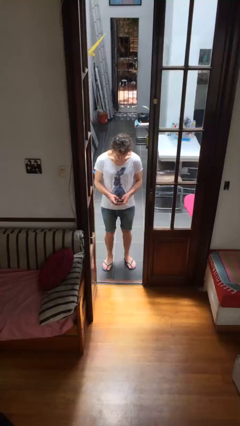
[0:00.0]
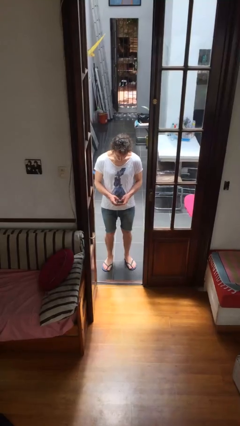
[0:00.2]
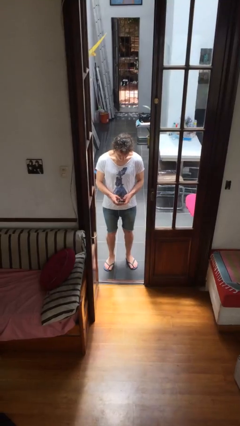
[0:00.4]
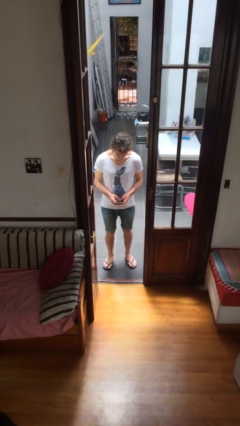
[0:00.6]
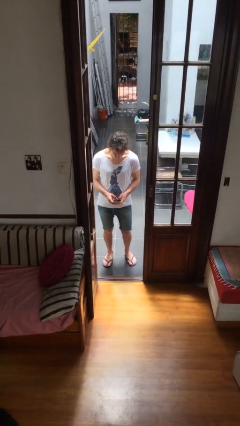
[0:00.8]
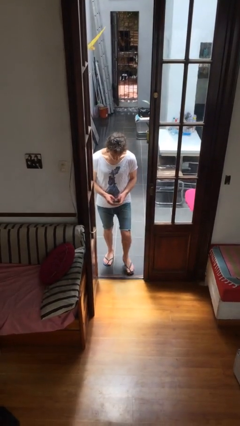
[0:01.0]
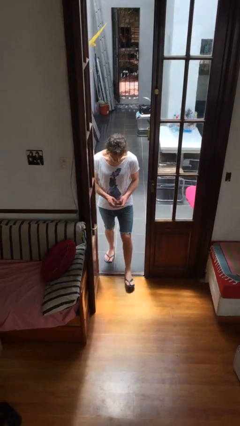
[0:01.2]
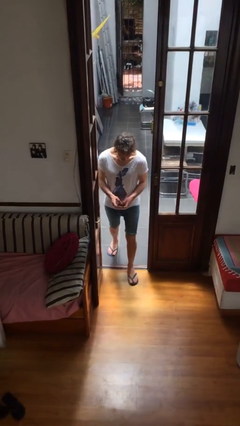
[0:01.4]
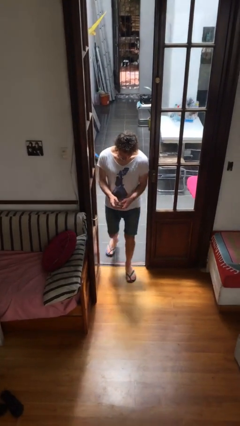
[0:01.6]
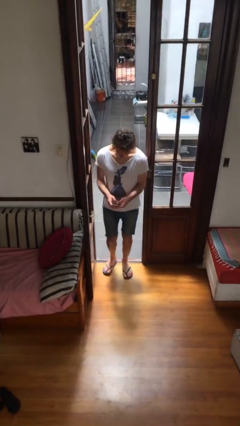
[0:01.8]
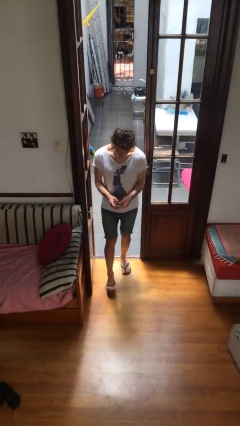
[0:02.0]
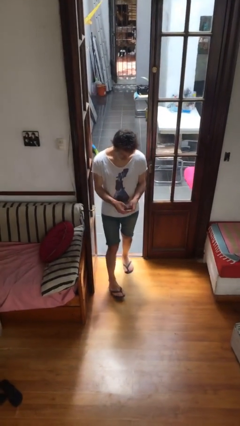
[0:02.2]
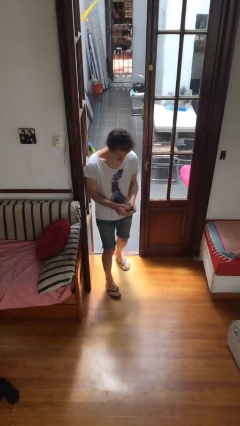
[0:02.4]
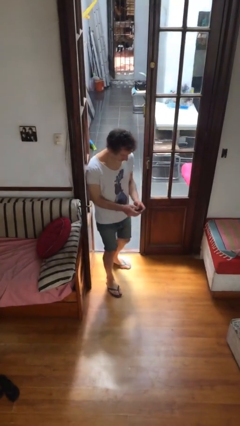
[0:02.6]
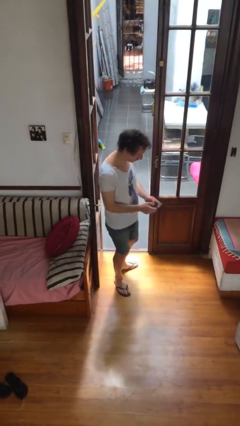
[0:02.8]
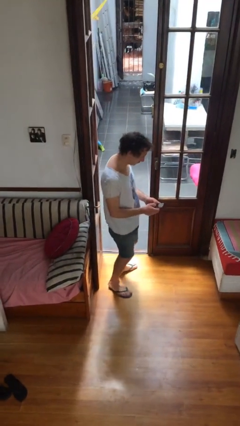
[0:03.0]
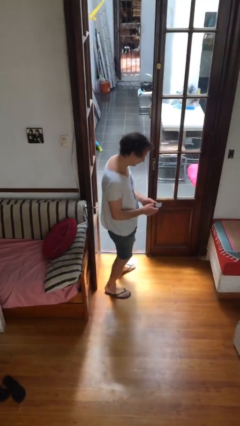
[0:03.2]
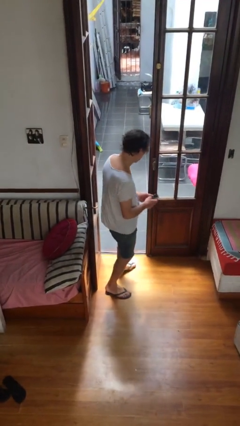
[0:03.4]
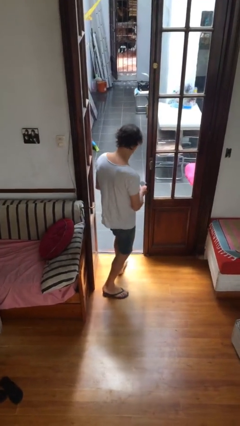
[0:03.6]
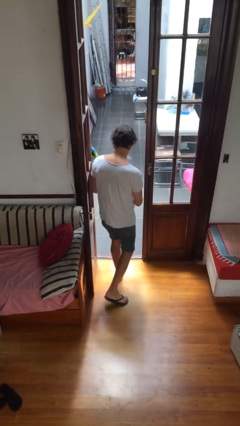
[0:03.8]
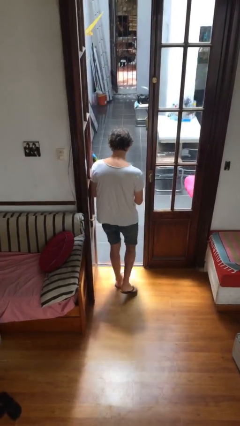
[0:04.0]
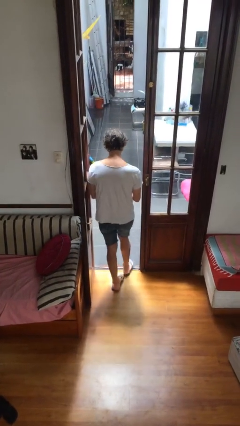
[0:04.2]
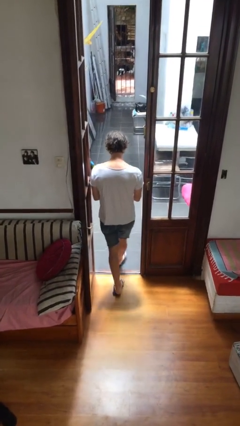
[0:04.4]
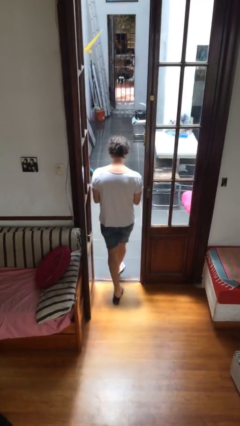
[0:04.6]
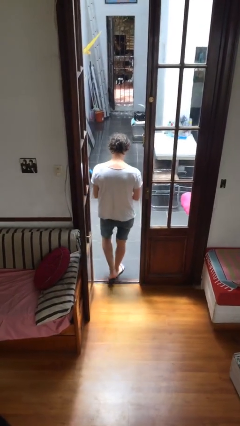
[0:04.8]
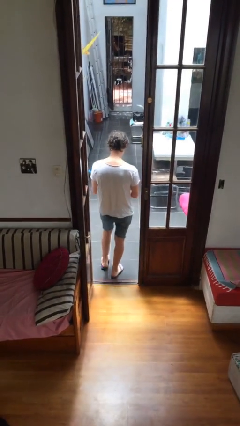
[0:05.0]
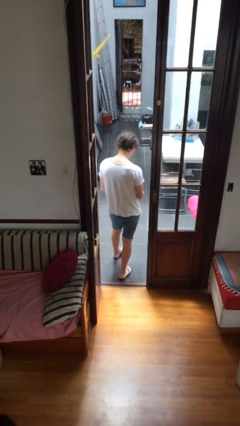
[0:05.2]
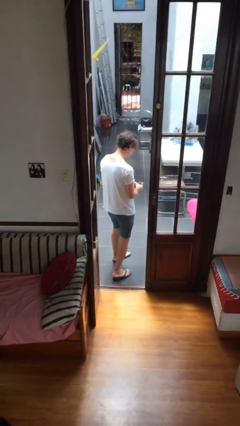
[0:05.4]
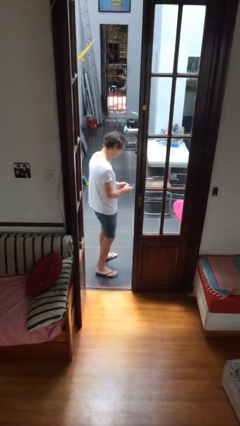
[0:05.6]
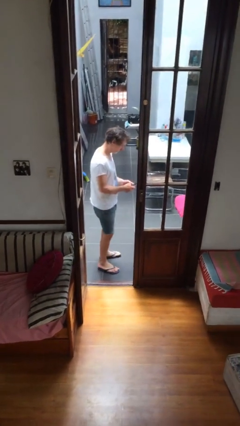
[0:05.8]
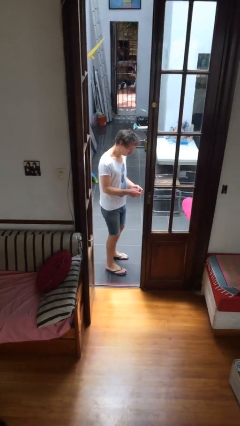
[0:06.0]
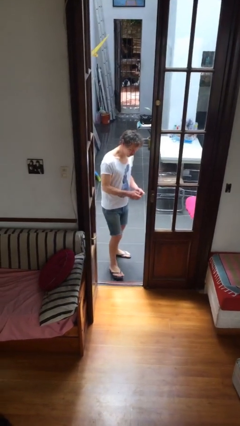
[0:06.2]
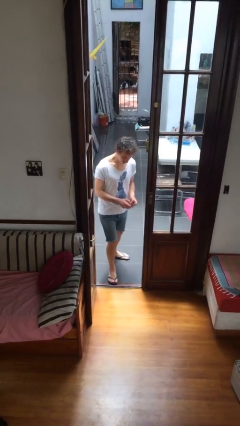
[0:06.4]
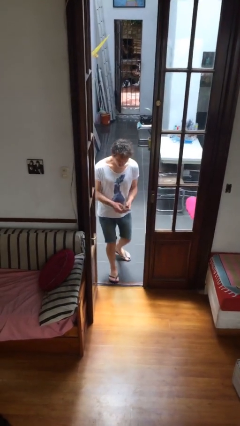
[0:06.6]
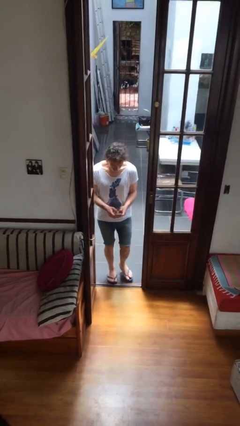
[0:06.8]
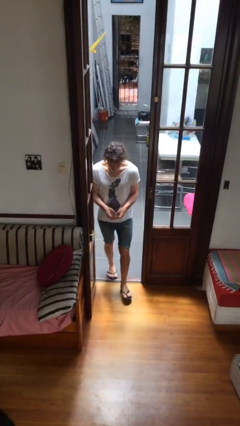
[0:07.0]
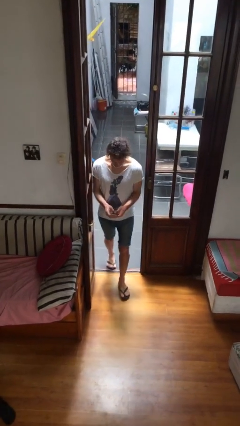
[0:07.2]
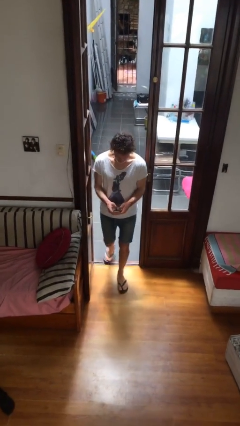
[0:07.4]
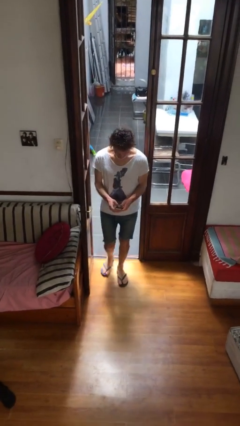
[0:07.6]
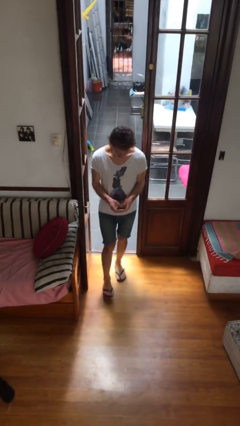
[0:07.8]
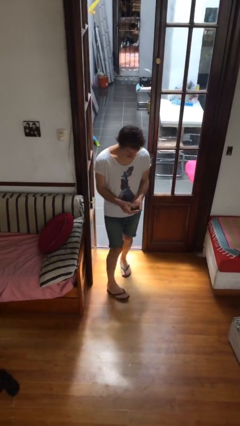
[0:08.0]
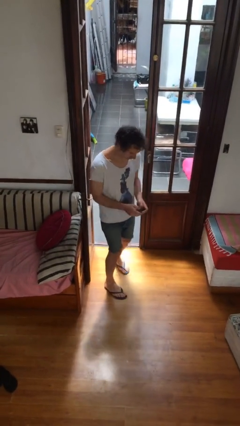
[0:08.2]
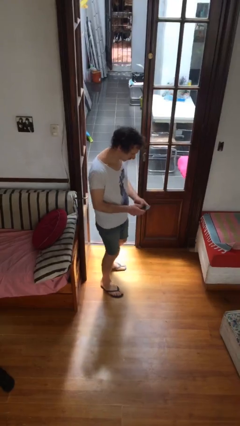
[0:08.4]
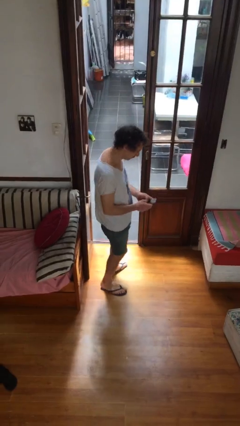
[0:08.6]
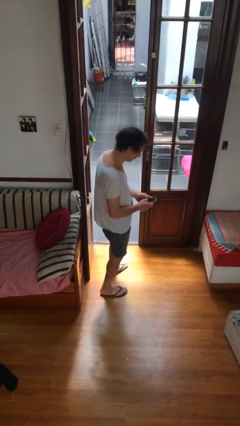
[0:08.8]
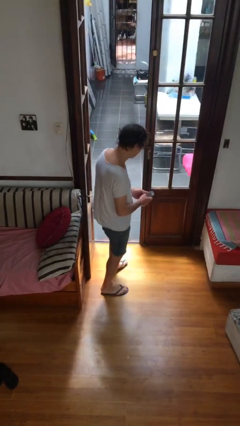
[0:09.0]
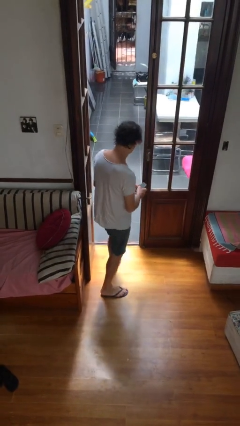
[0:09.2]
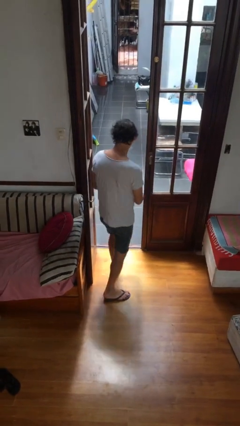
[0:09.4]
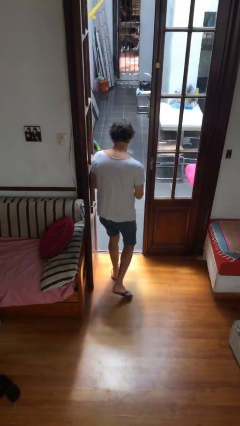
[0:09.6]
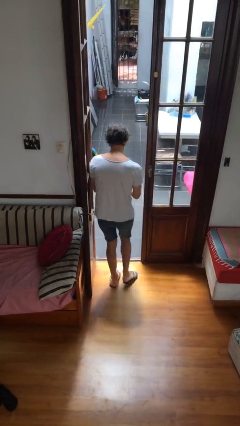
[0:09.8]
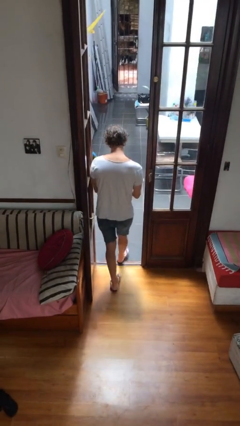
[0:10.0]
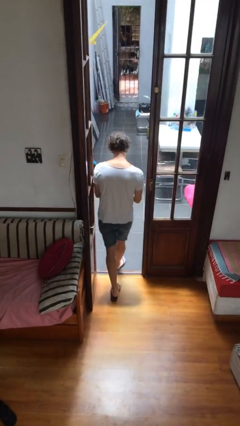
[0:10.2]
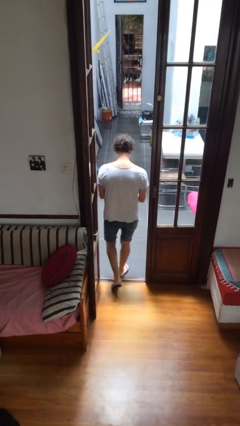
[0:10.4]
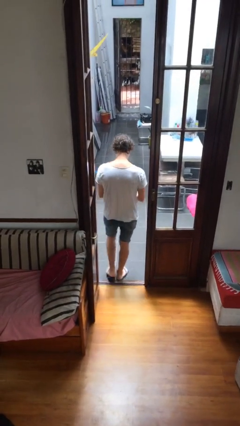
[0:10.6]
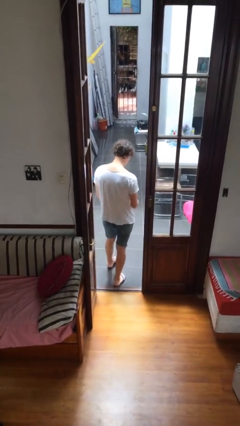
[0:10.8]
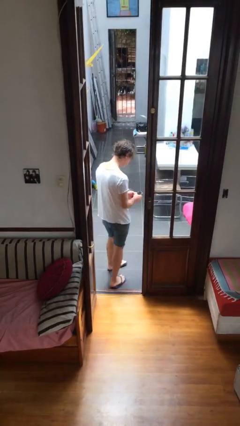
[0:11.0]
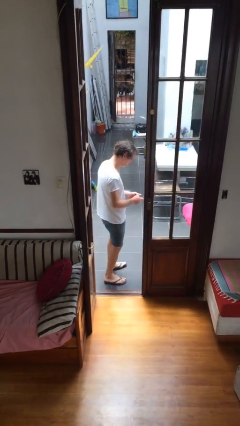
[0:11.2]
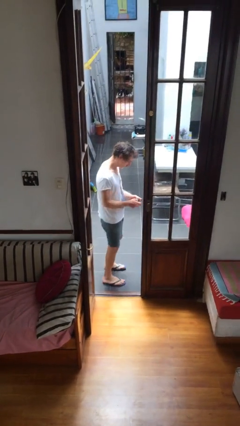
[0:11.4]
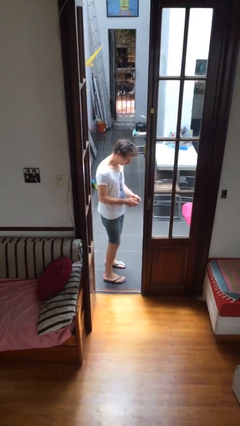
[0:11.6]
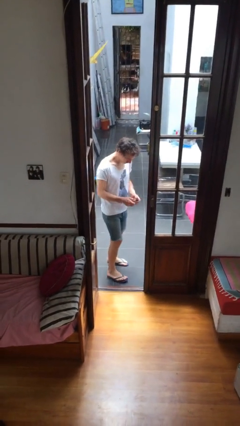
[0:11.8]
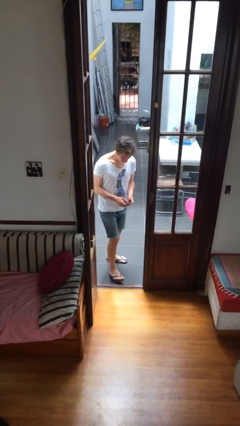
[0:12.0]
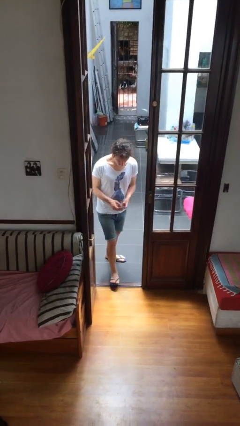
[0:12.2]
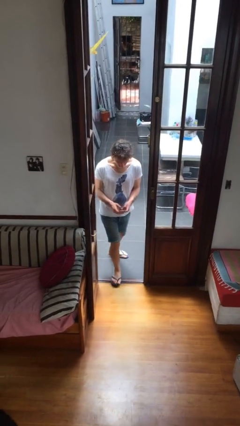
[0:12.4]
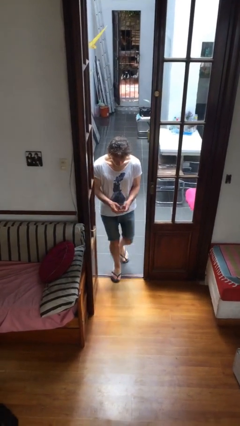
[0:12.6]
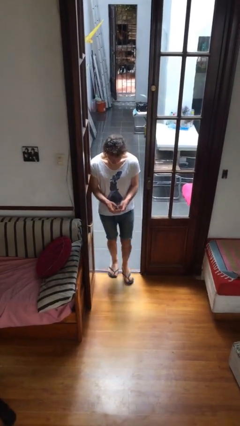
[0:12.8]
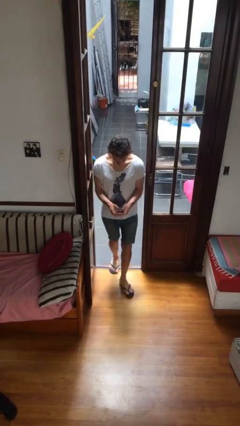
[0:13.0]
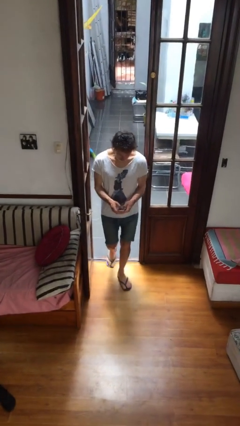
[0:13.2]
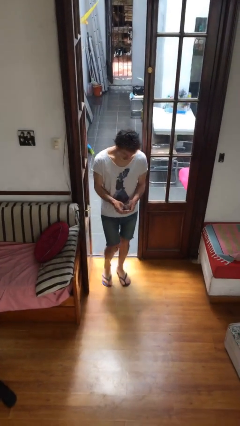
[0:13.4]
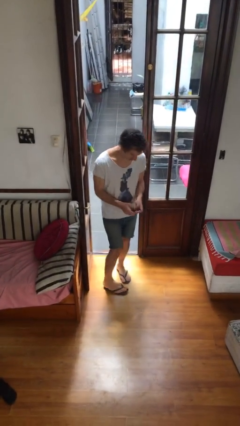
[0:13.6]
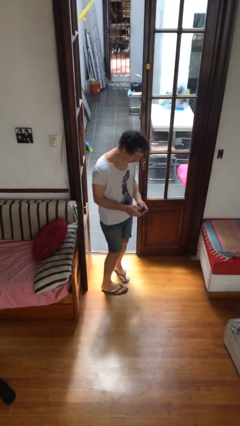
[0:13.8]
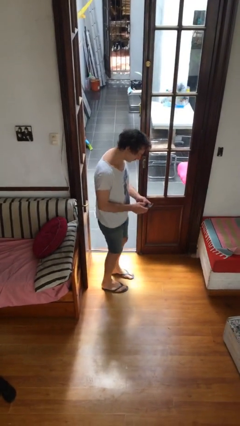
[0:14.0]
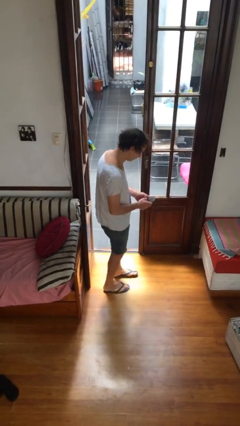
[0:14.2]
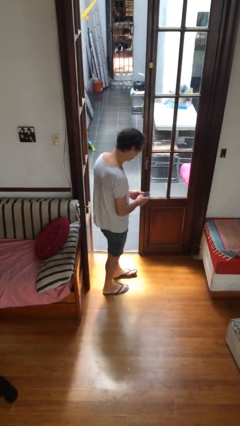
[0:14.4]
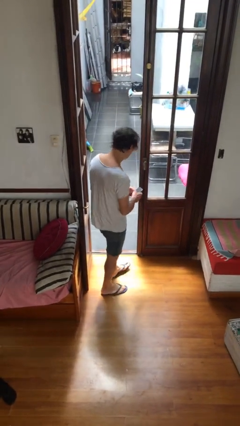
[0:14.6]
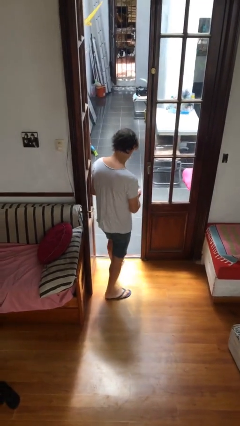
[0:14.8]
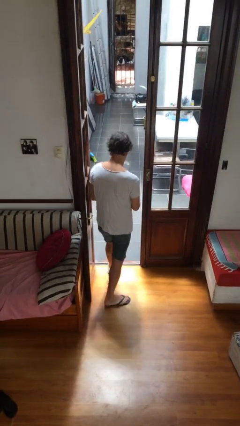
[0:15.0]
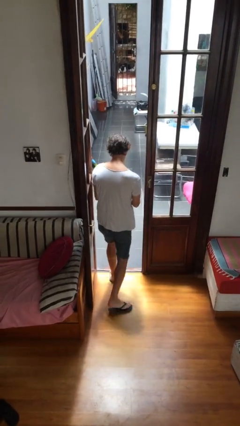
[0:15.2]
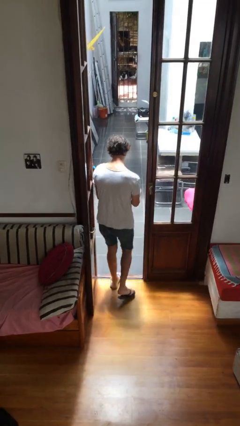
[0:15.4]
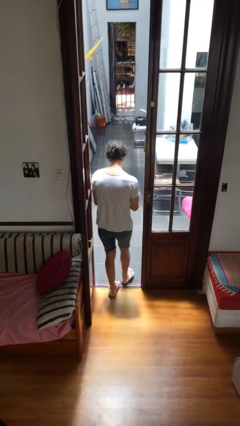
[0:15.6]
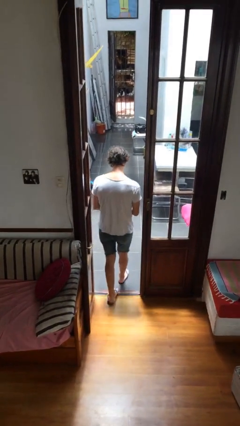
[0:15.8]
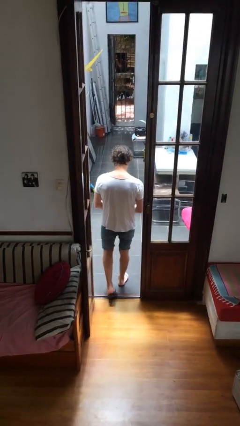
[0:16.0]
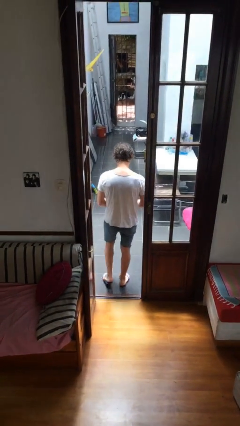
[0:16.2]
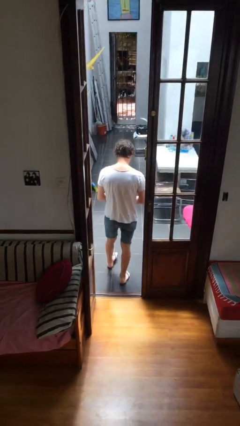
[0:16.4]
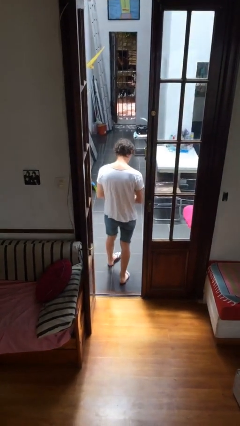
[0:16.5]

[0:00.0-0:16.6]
person texts on phone

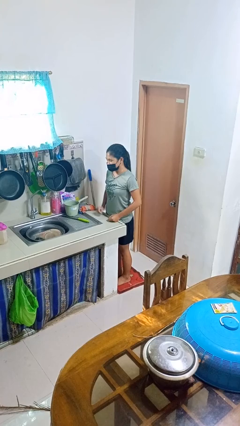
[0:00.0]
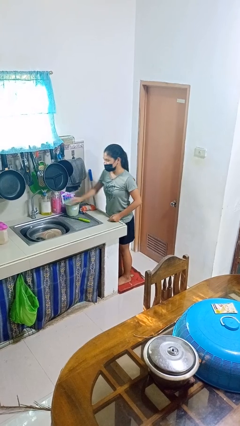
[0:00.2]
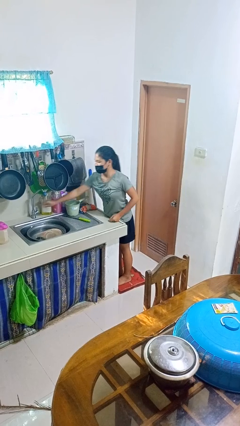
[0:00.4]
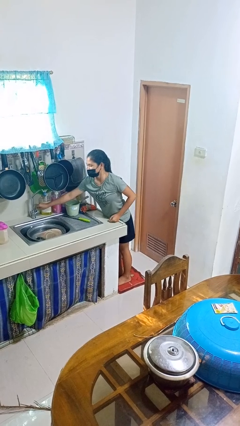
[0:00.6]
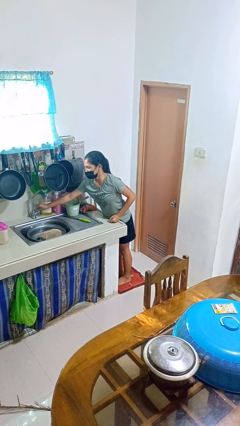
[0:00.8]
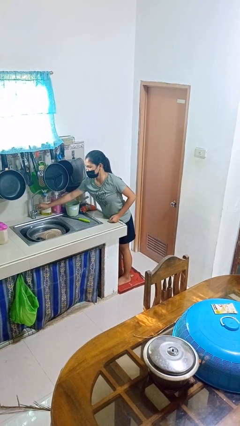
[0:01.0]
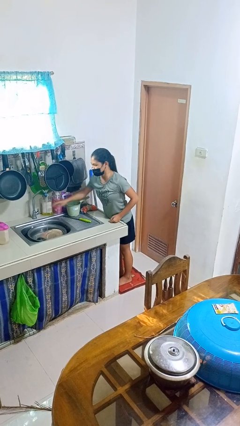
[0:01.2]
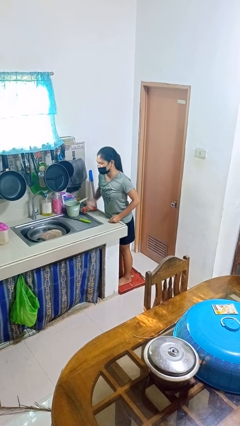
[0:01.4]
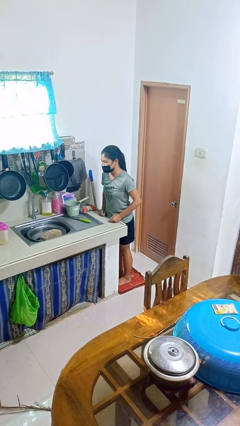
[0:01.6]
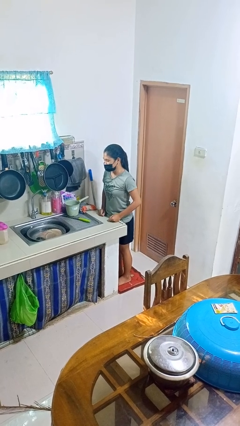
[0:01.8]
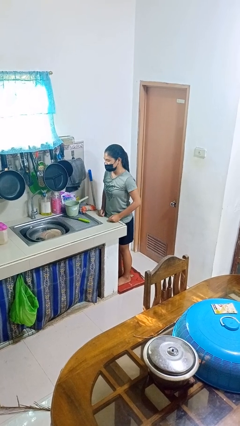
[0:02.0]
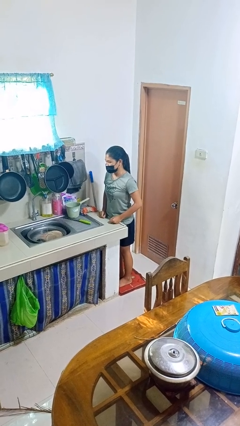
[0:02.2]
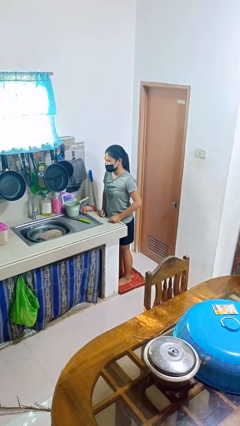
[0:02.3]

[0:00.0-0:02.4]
person turns on faucet
